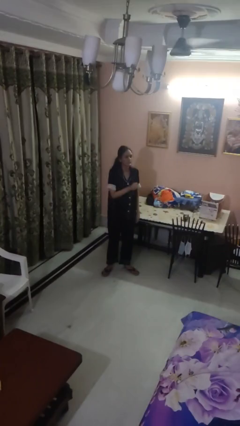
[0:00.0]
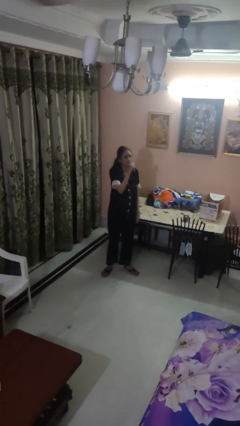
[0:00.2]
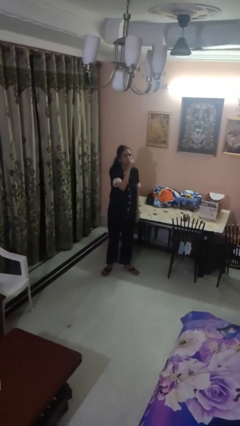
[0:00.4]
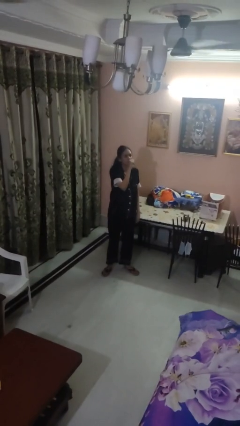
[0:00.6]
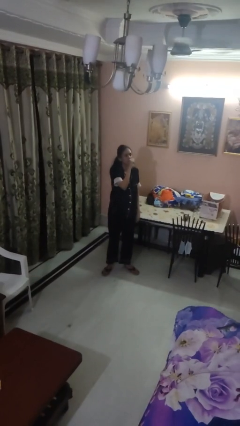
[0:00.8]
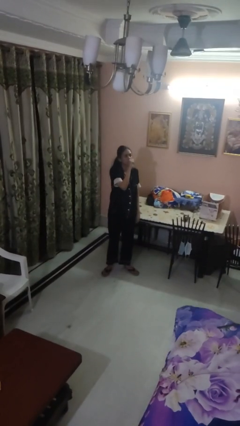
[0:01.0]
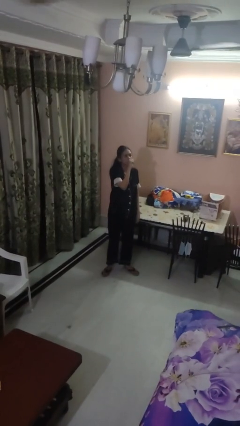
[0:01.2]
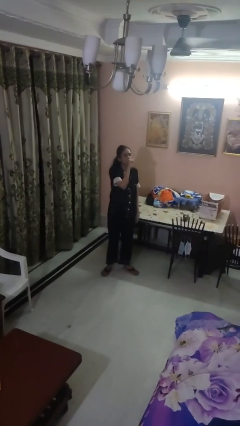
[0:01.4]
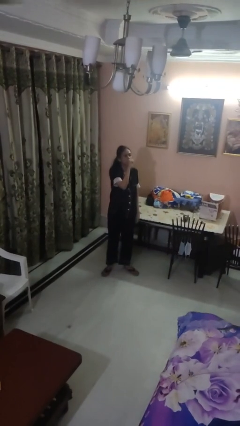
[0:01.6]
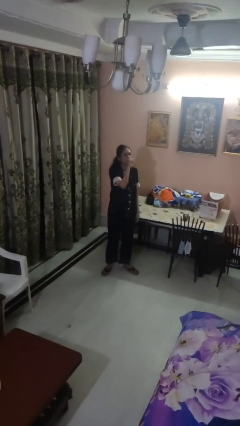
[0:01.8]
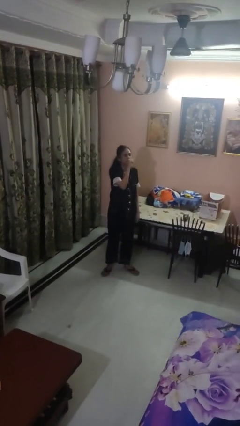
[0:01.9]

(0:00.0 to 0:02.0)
person vapes

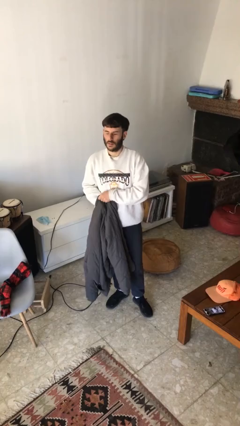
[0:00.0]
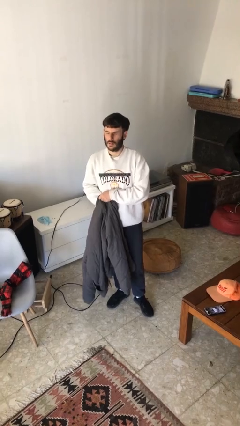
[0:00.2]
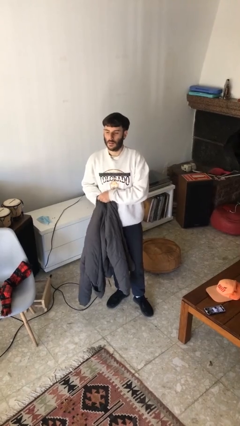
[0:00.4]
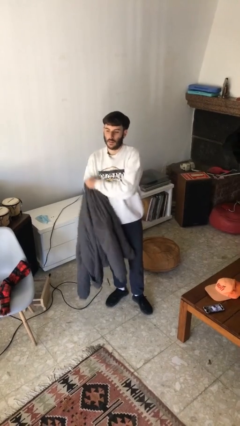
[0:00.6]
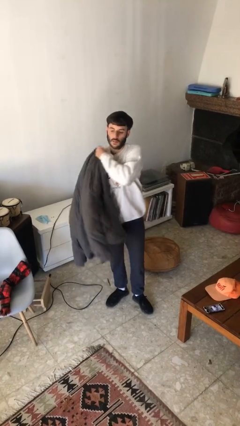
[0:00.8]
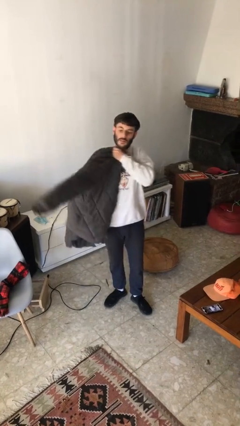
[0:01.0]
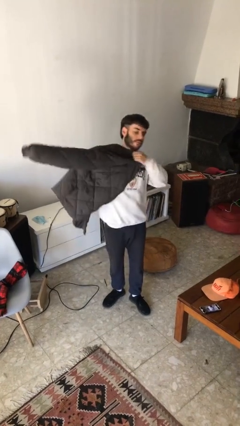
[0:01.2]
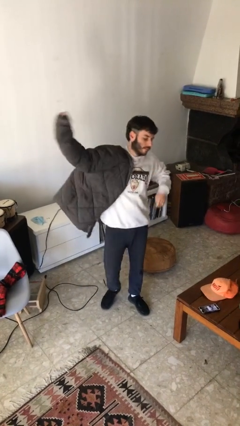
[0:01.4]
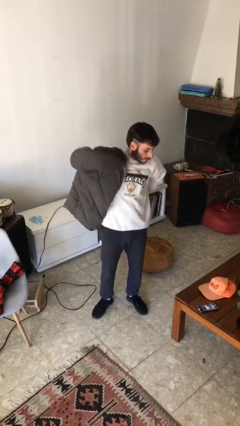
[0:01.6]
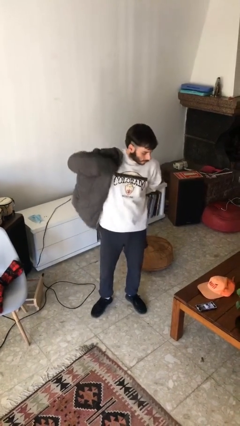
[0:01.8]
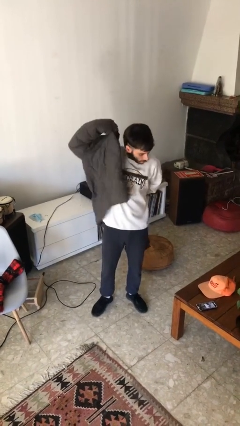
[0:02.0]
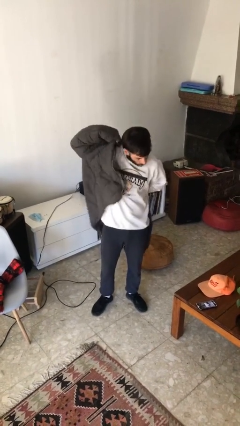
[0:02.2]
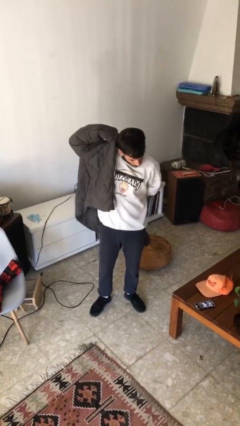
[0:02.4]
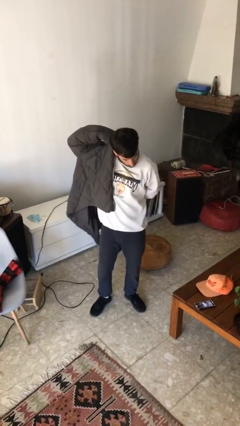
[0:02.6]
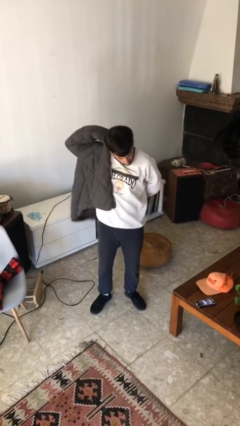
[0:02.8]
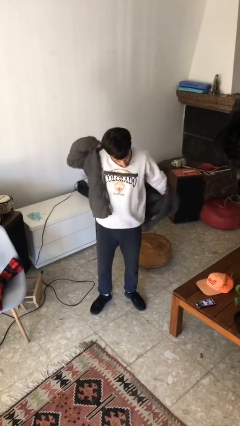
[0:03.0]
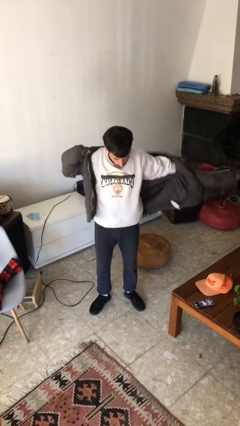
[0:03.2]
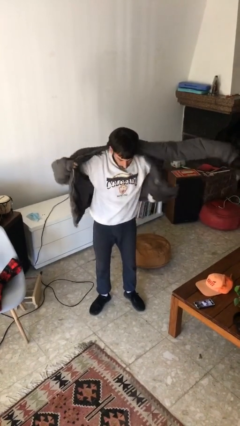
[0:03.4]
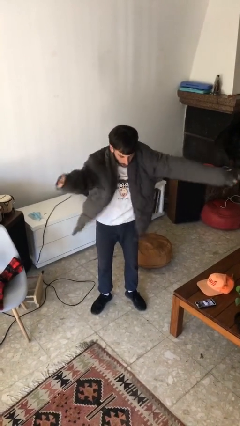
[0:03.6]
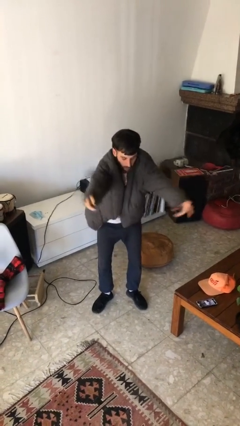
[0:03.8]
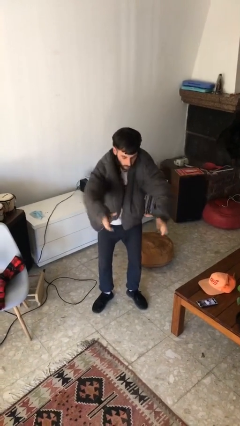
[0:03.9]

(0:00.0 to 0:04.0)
person puts on jacket

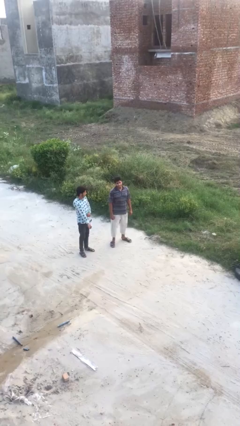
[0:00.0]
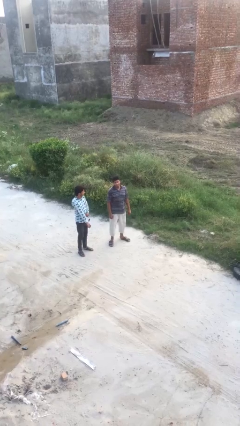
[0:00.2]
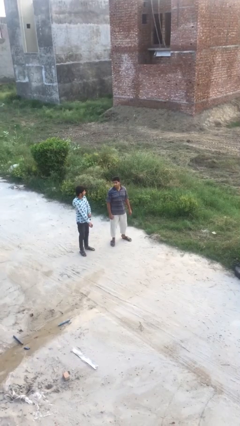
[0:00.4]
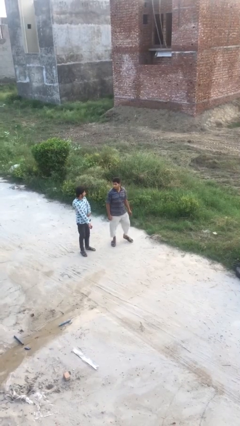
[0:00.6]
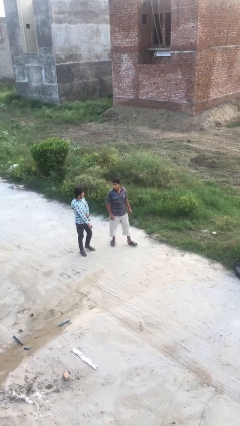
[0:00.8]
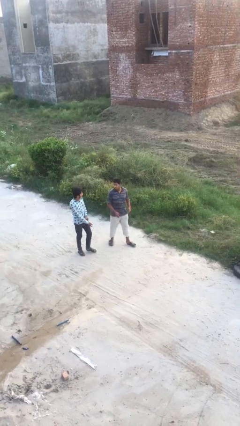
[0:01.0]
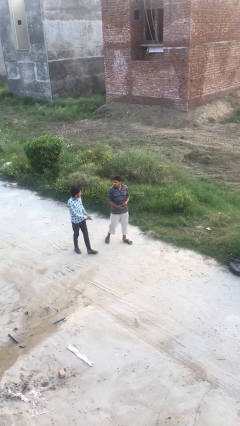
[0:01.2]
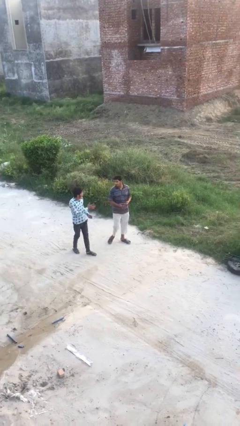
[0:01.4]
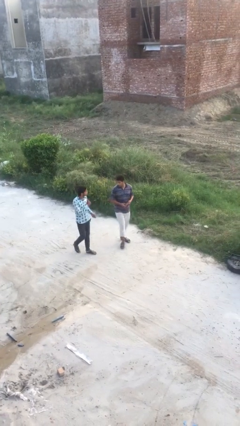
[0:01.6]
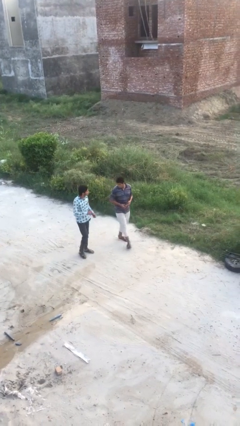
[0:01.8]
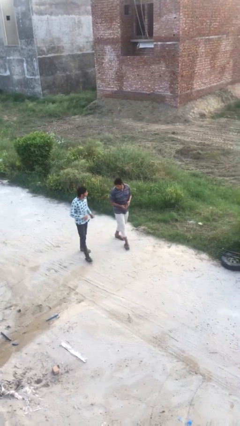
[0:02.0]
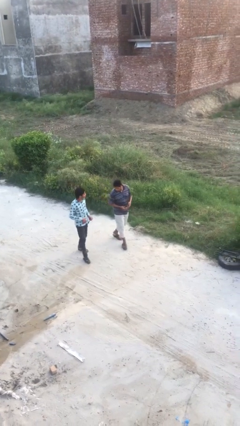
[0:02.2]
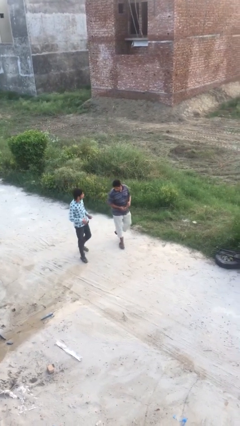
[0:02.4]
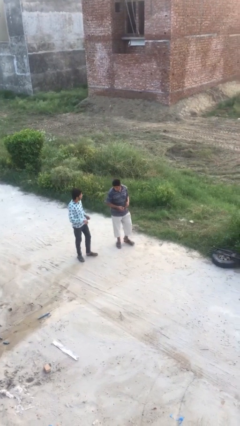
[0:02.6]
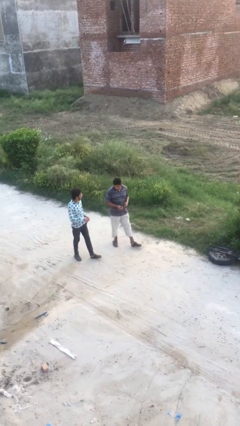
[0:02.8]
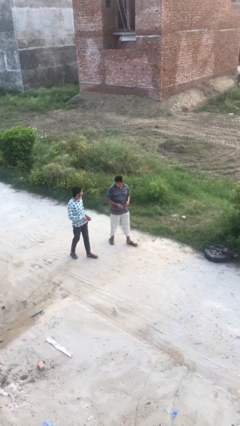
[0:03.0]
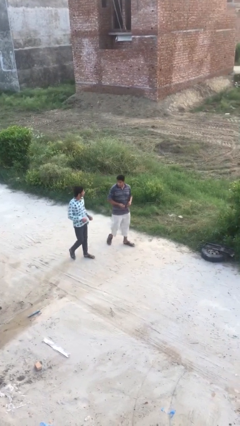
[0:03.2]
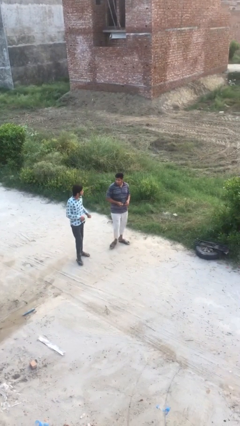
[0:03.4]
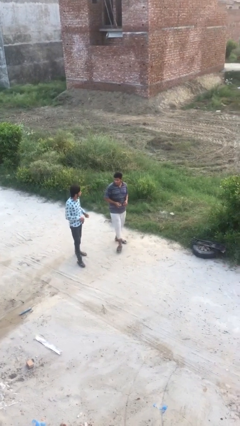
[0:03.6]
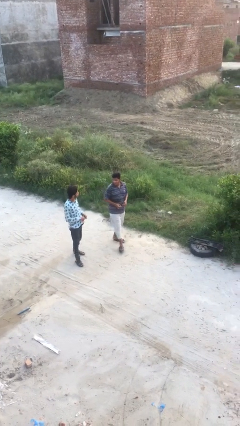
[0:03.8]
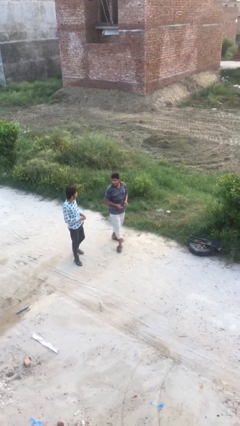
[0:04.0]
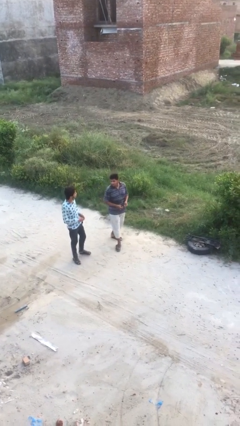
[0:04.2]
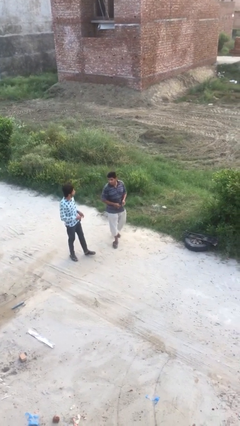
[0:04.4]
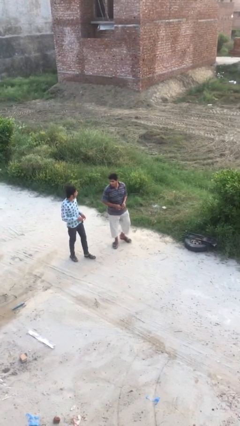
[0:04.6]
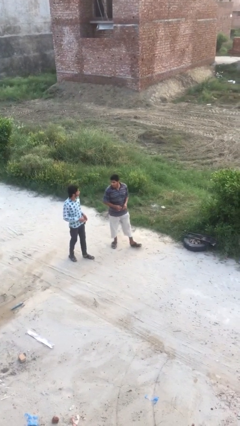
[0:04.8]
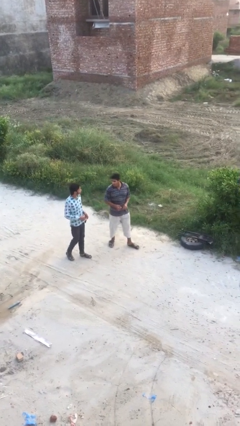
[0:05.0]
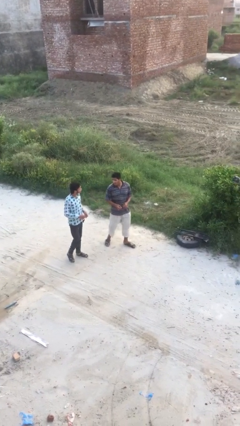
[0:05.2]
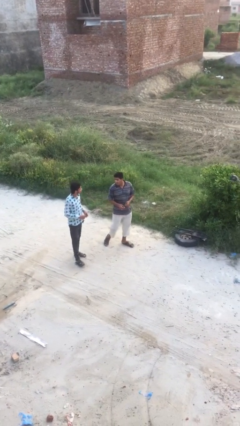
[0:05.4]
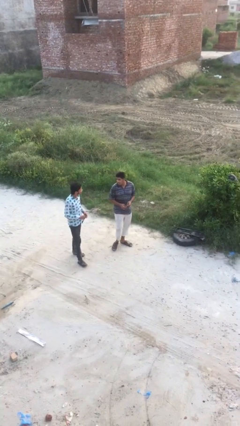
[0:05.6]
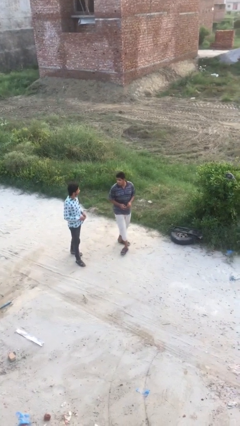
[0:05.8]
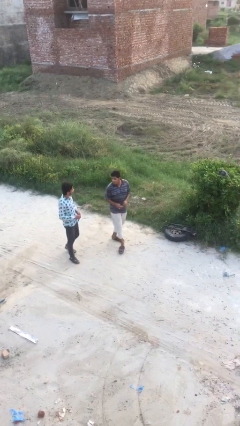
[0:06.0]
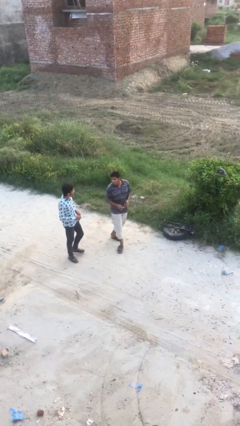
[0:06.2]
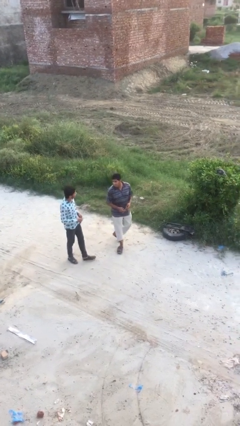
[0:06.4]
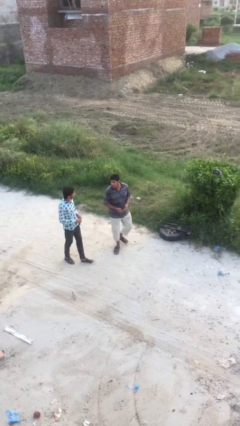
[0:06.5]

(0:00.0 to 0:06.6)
person talks to person

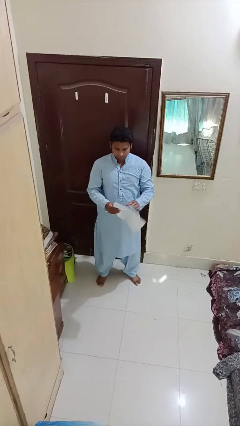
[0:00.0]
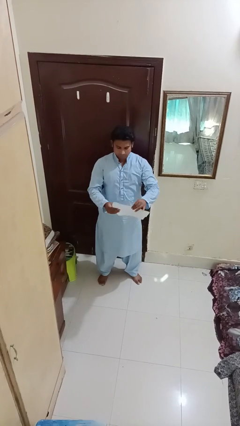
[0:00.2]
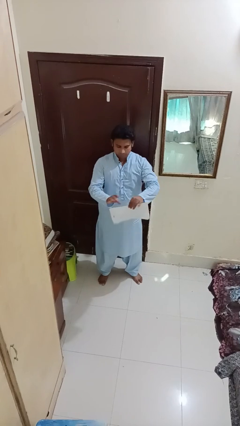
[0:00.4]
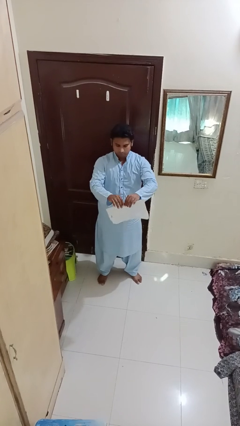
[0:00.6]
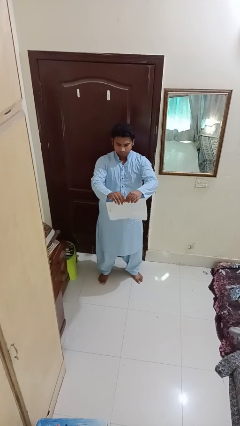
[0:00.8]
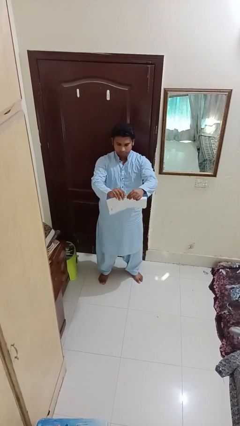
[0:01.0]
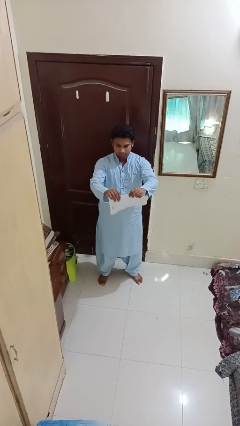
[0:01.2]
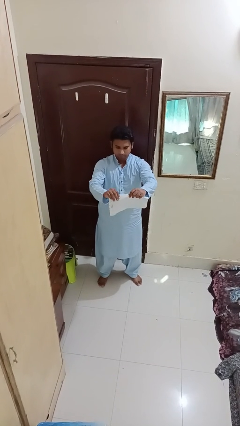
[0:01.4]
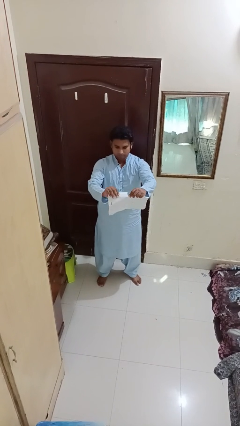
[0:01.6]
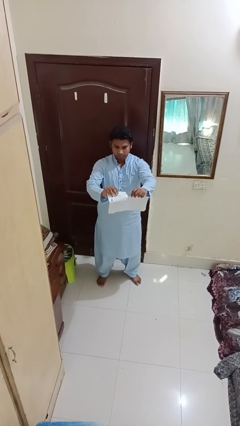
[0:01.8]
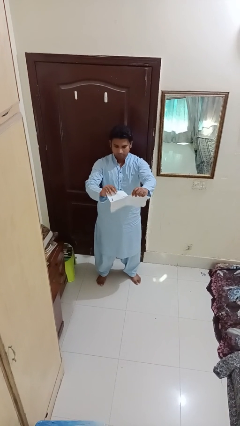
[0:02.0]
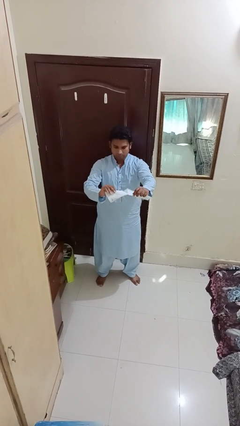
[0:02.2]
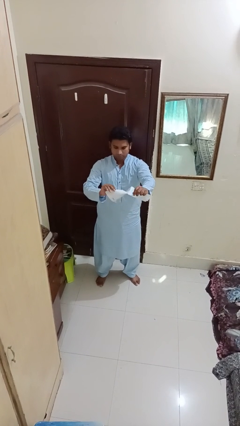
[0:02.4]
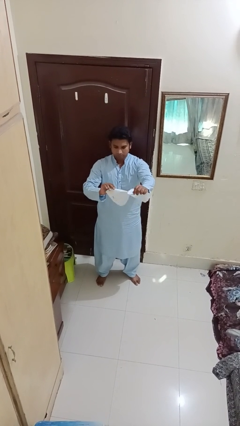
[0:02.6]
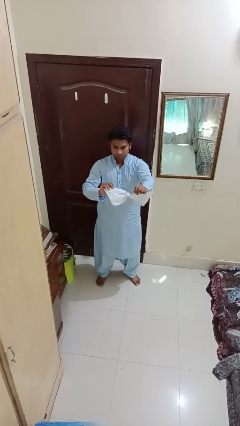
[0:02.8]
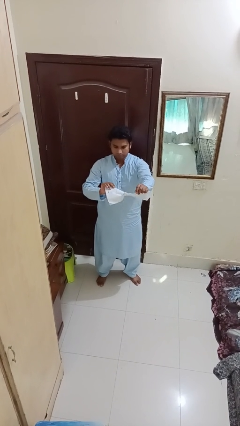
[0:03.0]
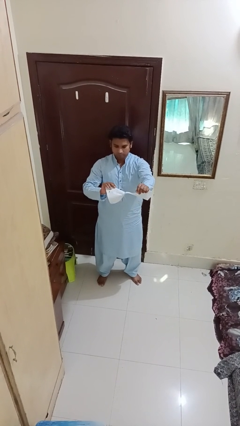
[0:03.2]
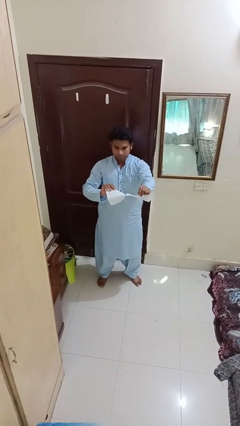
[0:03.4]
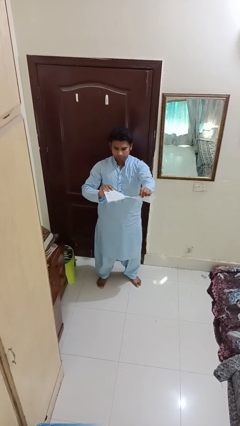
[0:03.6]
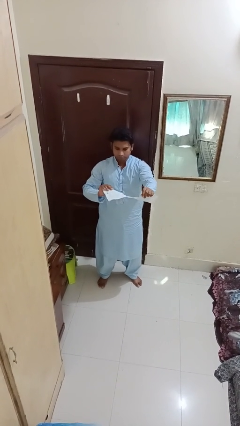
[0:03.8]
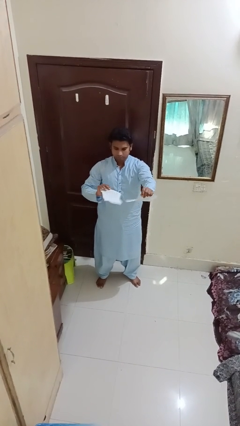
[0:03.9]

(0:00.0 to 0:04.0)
person tears paper

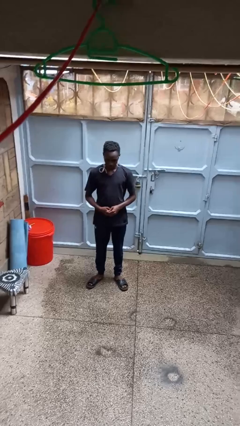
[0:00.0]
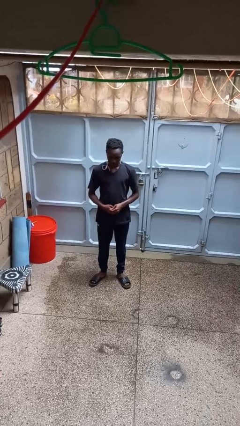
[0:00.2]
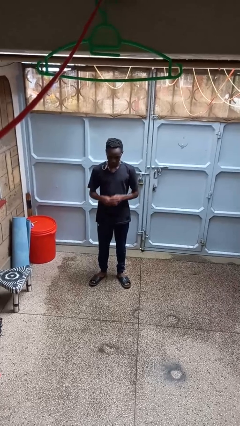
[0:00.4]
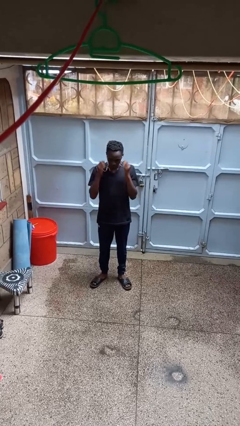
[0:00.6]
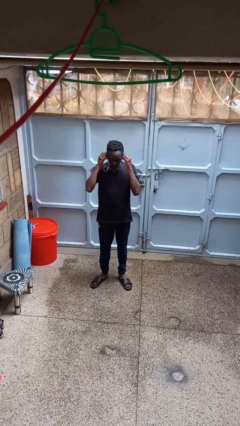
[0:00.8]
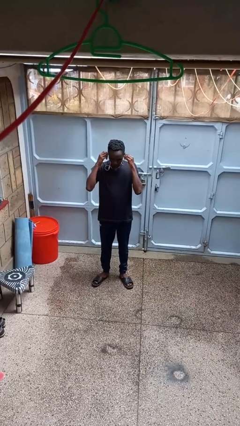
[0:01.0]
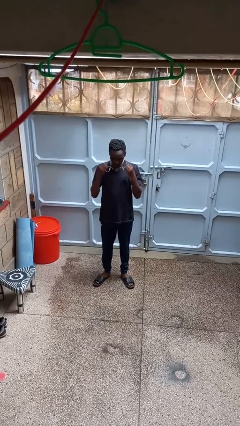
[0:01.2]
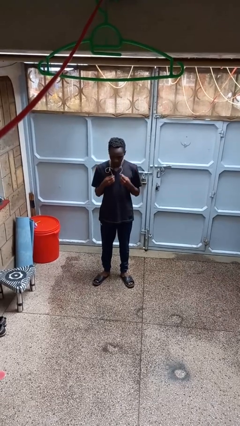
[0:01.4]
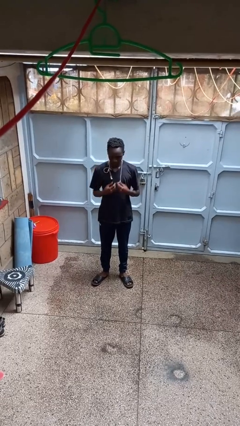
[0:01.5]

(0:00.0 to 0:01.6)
person takes off headphones
